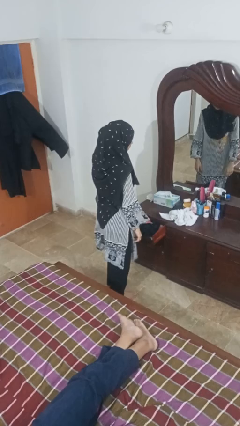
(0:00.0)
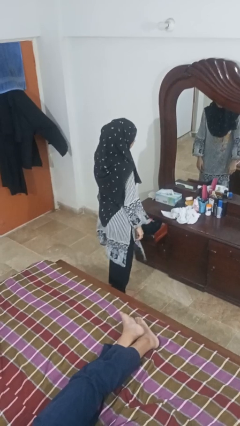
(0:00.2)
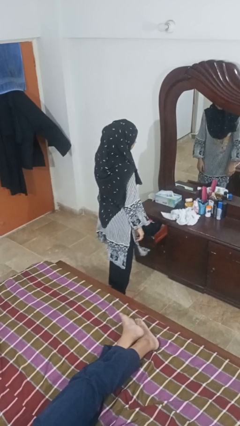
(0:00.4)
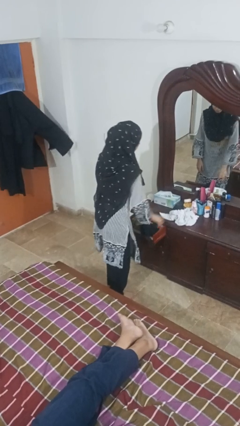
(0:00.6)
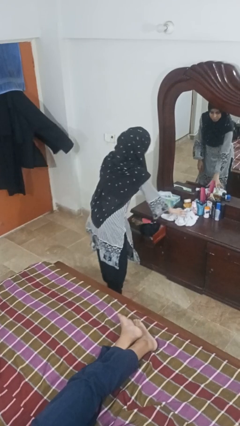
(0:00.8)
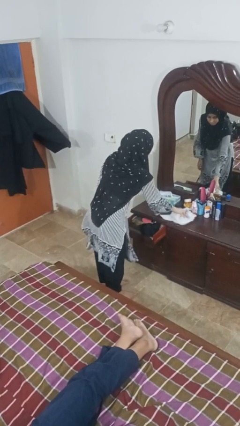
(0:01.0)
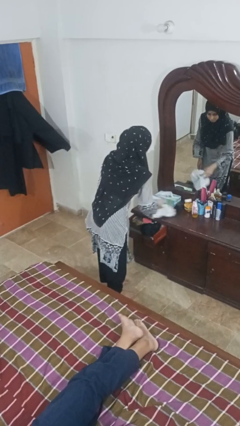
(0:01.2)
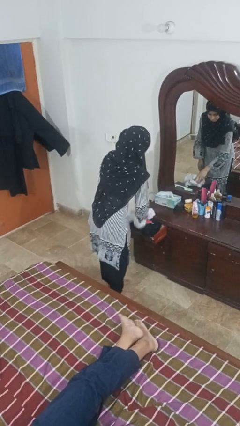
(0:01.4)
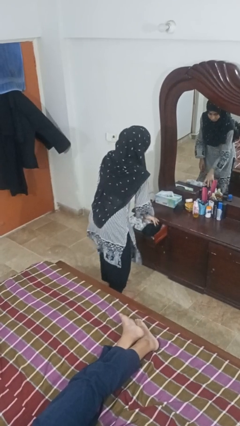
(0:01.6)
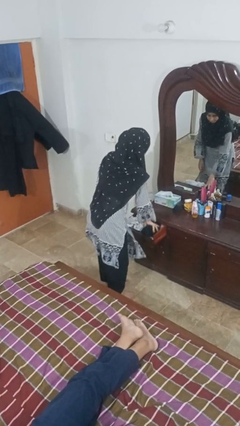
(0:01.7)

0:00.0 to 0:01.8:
person puts clothes into dresser

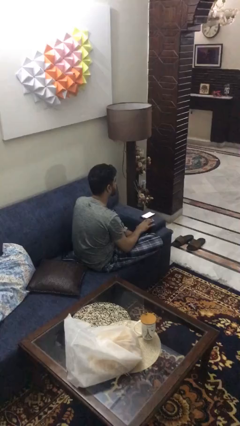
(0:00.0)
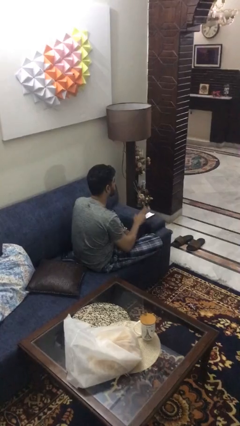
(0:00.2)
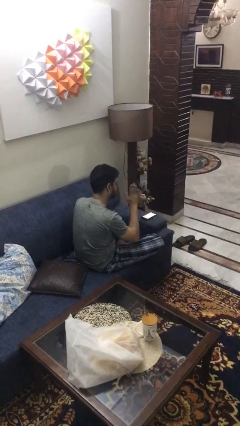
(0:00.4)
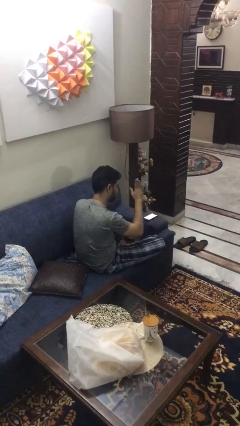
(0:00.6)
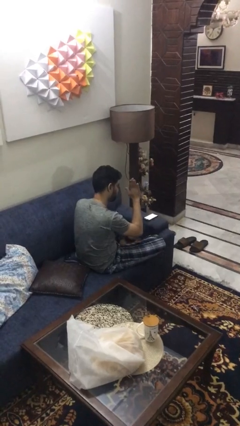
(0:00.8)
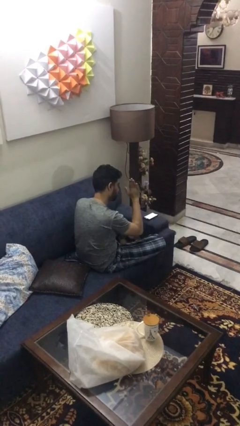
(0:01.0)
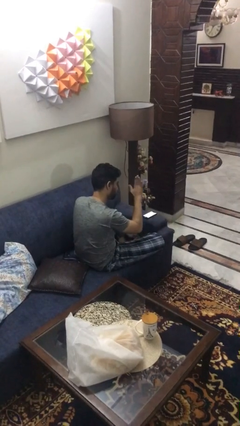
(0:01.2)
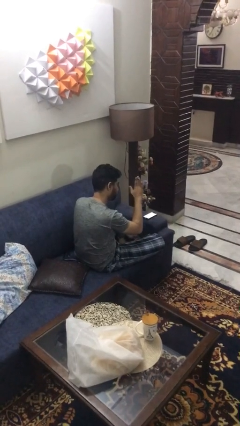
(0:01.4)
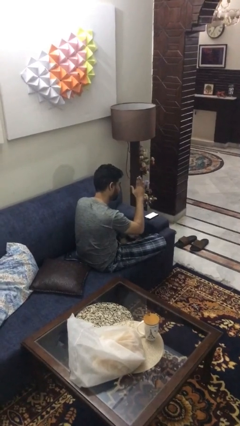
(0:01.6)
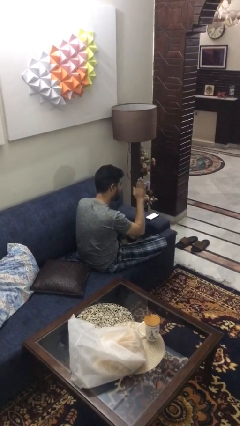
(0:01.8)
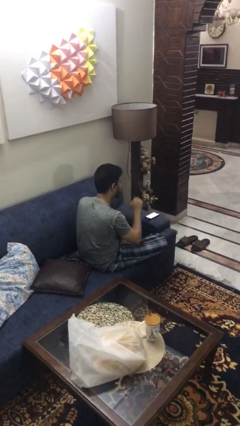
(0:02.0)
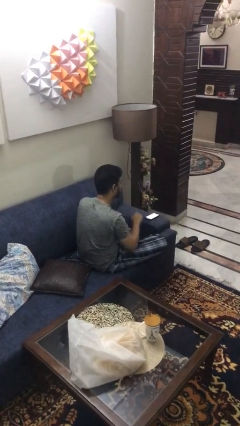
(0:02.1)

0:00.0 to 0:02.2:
person gestures stop

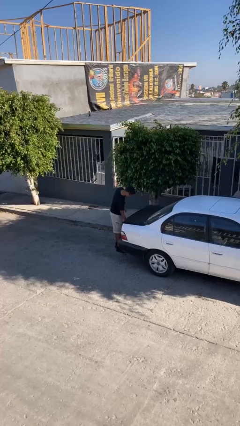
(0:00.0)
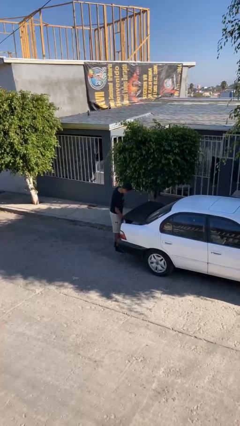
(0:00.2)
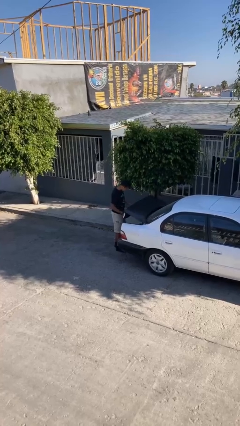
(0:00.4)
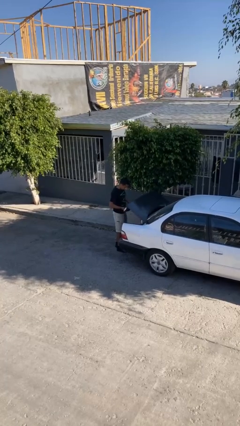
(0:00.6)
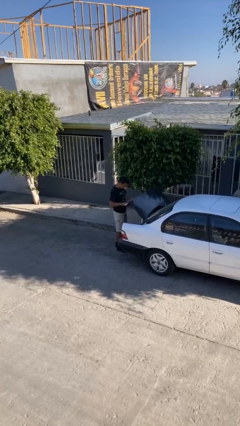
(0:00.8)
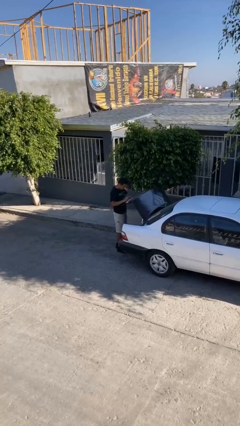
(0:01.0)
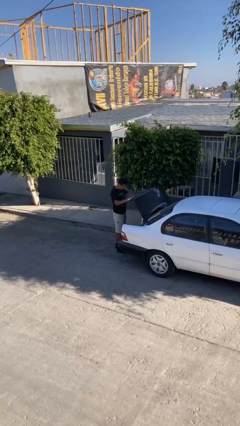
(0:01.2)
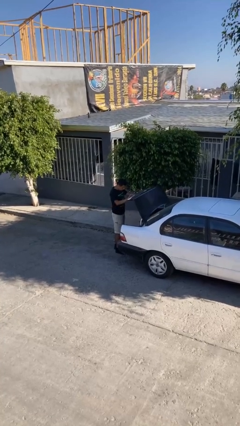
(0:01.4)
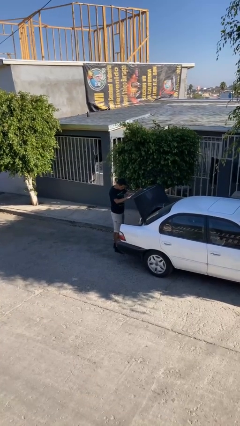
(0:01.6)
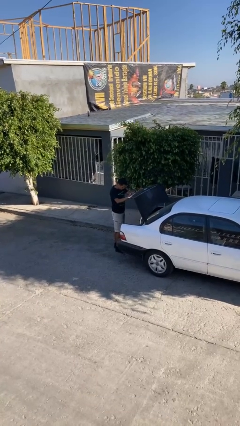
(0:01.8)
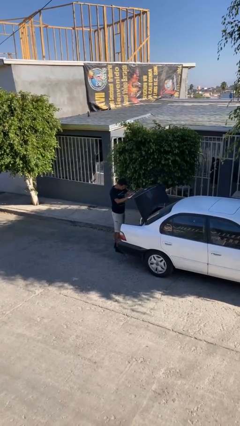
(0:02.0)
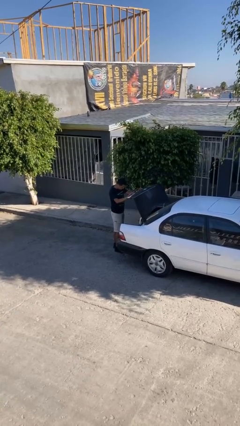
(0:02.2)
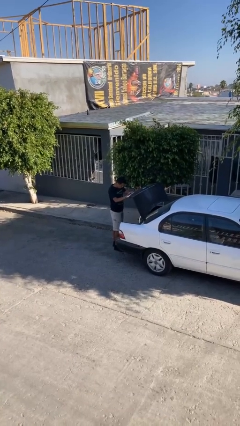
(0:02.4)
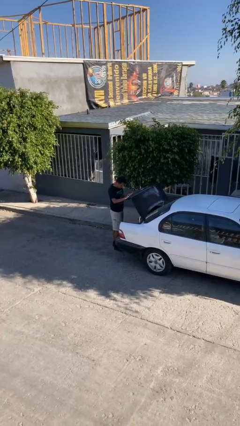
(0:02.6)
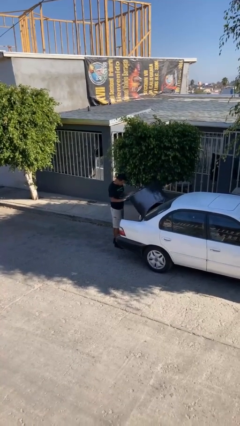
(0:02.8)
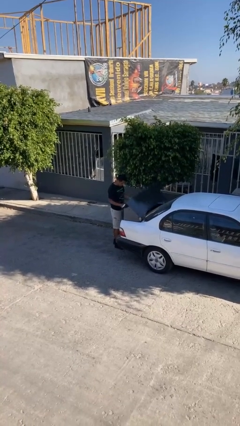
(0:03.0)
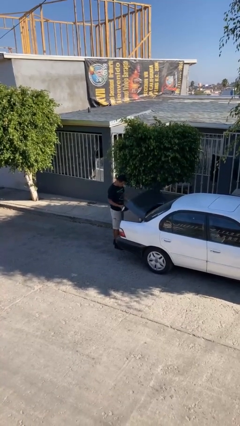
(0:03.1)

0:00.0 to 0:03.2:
person opens car trunk

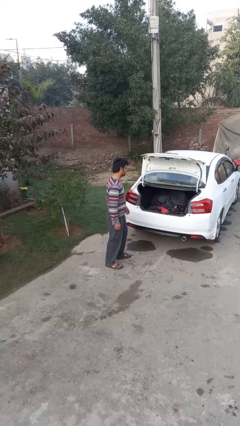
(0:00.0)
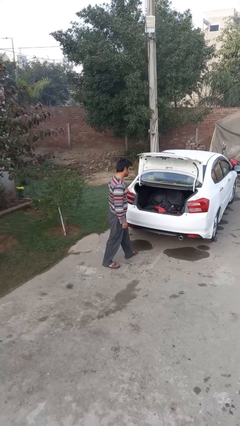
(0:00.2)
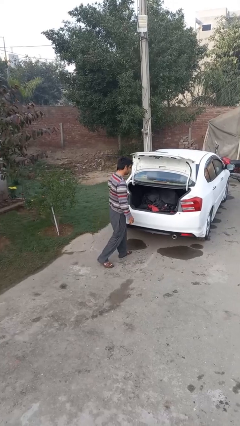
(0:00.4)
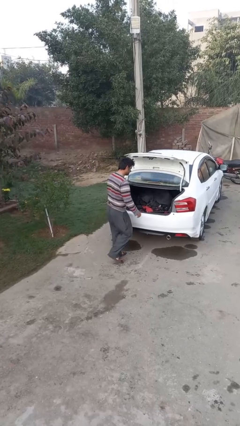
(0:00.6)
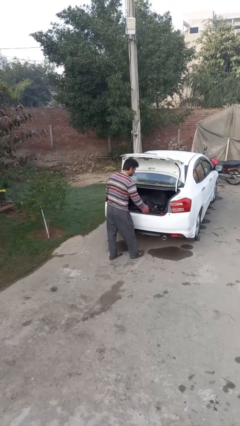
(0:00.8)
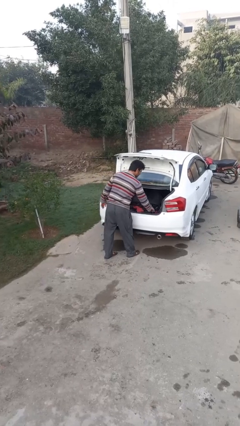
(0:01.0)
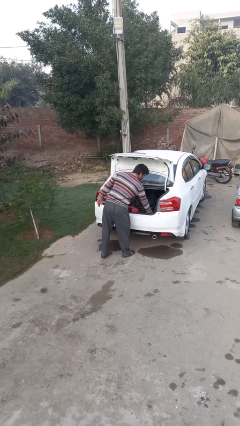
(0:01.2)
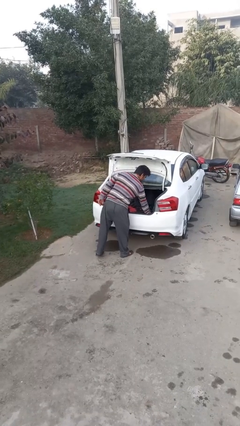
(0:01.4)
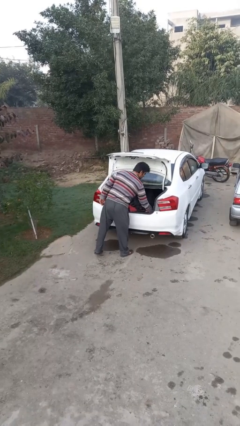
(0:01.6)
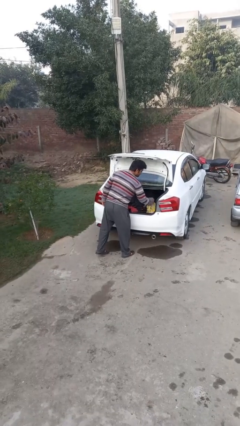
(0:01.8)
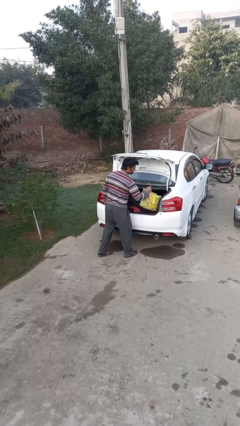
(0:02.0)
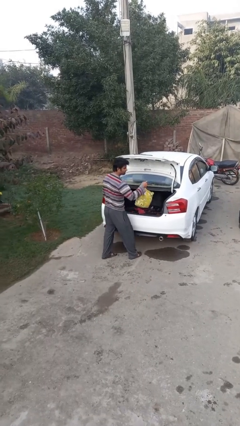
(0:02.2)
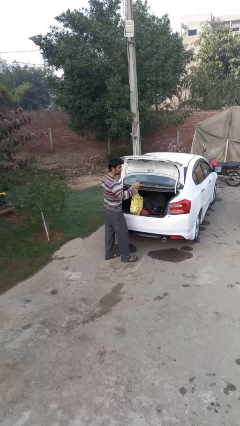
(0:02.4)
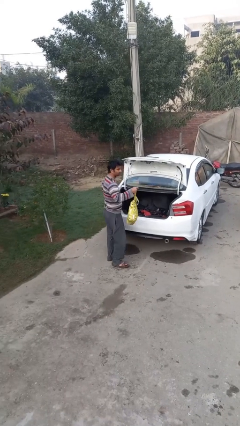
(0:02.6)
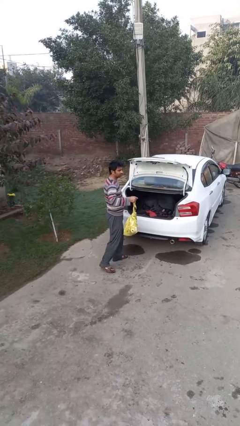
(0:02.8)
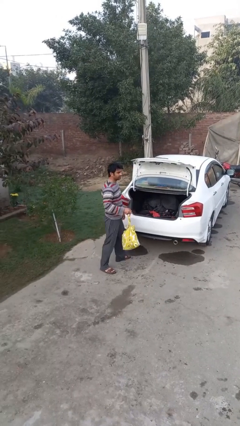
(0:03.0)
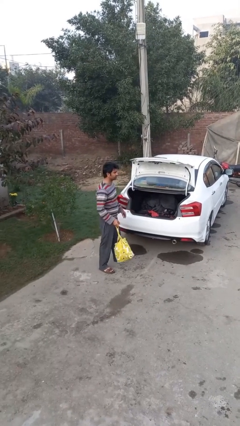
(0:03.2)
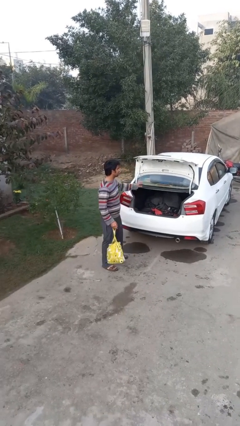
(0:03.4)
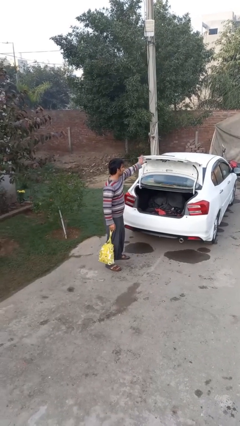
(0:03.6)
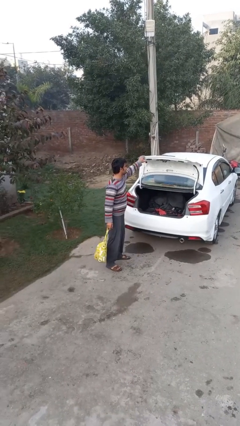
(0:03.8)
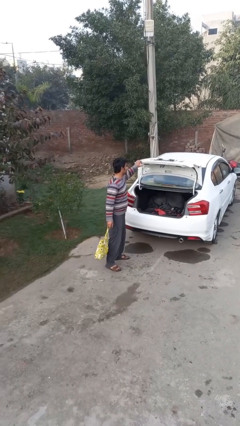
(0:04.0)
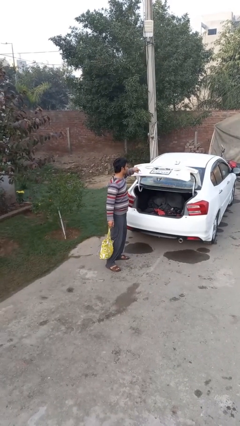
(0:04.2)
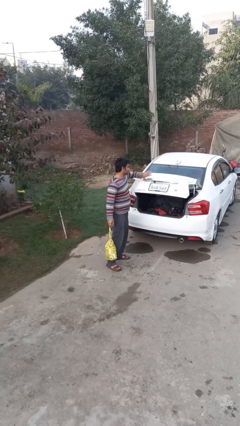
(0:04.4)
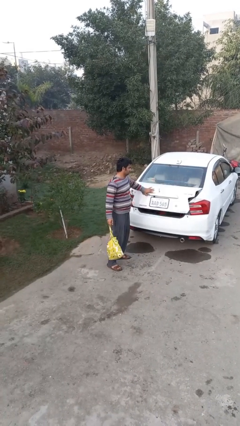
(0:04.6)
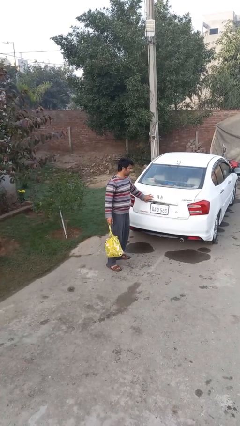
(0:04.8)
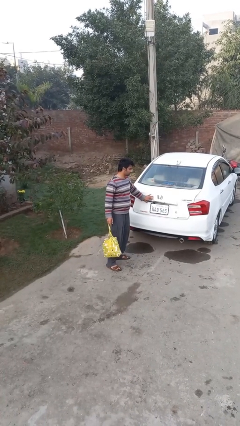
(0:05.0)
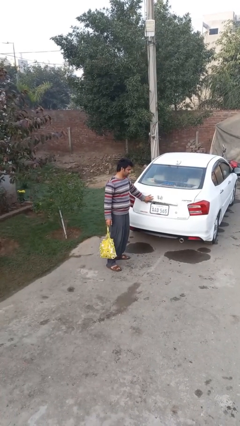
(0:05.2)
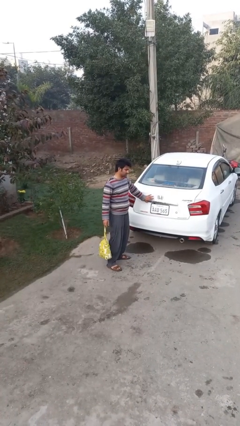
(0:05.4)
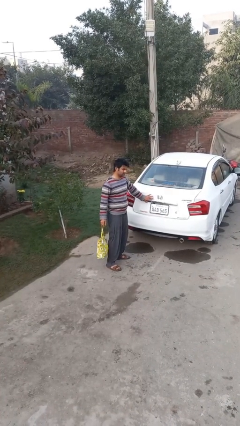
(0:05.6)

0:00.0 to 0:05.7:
person unloads car

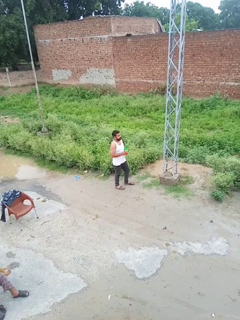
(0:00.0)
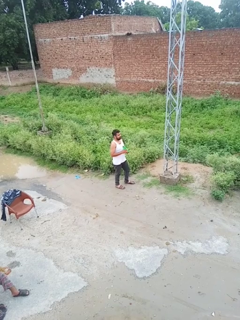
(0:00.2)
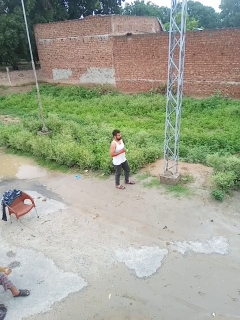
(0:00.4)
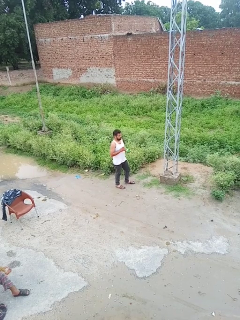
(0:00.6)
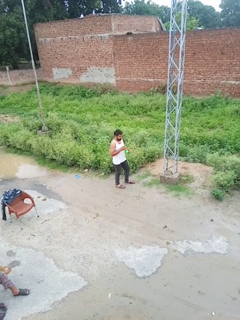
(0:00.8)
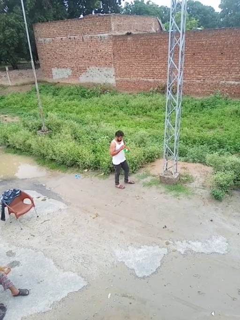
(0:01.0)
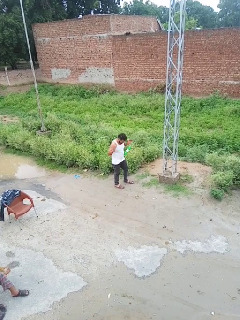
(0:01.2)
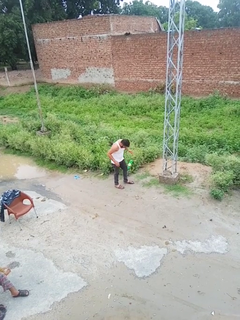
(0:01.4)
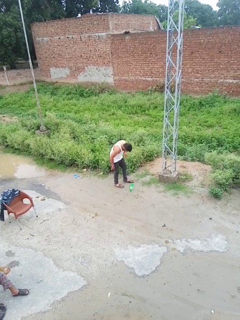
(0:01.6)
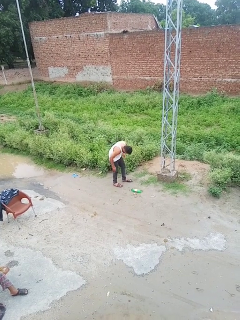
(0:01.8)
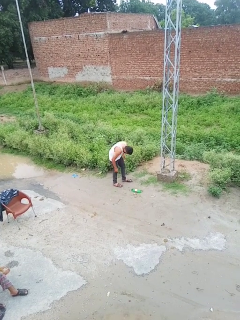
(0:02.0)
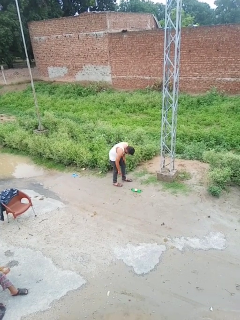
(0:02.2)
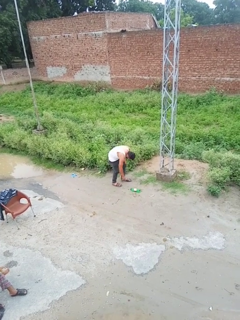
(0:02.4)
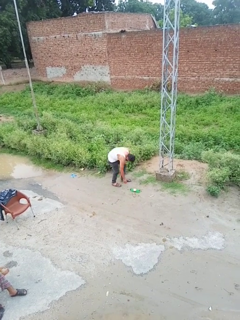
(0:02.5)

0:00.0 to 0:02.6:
person drops object

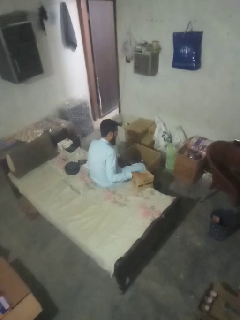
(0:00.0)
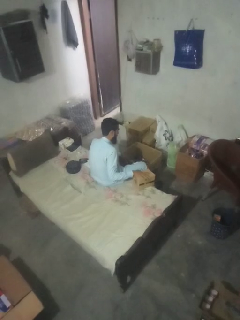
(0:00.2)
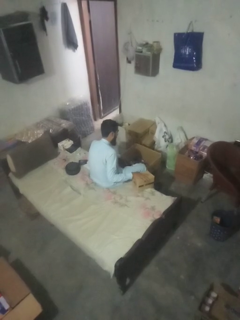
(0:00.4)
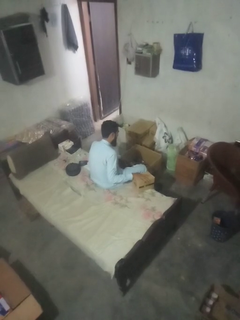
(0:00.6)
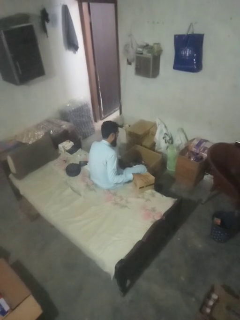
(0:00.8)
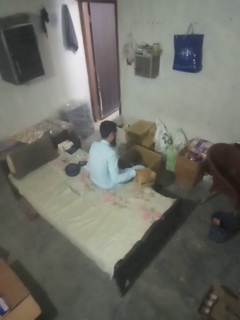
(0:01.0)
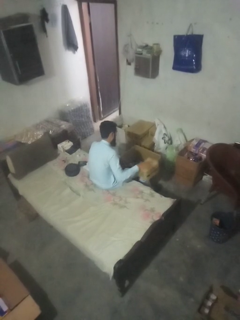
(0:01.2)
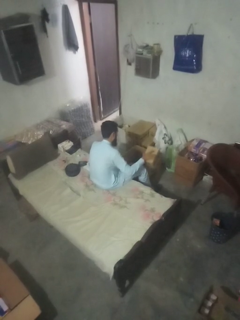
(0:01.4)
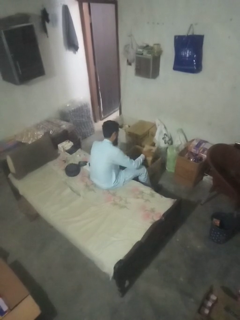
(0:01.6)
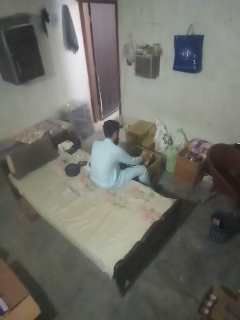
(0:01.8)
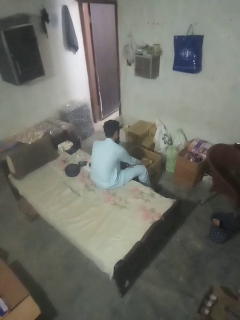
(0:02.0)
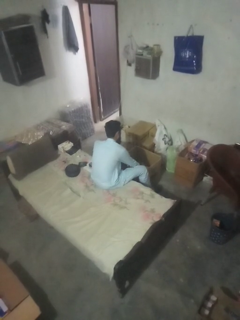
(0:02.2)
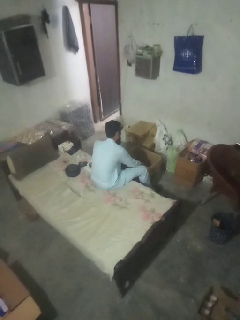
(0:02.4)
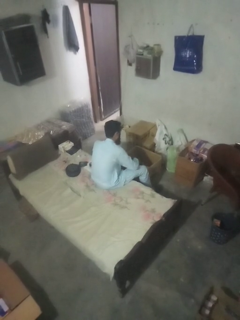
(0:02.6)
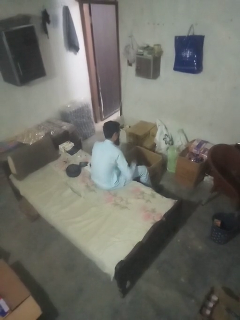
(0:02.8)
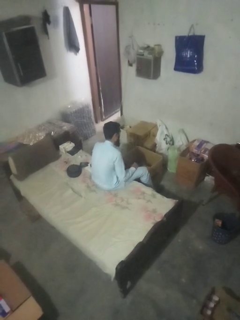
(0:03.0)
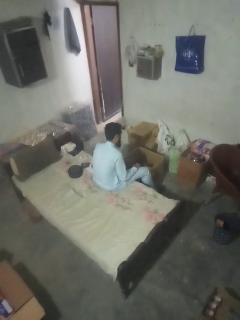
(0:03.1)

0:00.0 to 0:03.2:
person puts object into box

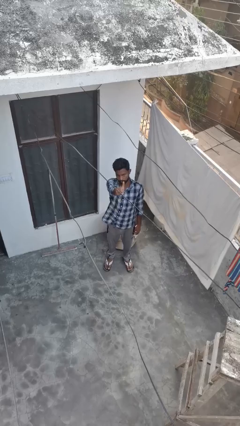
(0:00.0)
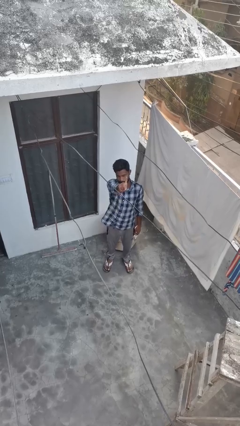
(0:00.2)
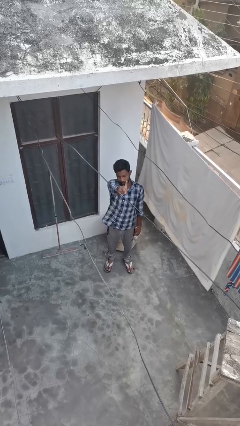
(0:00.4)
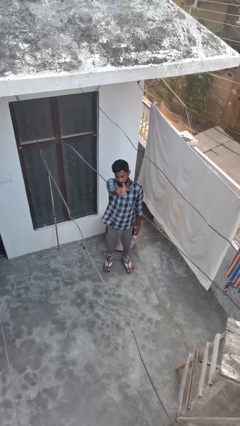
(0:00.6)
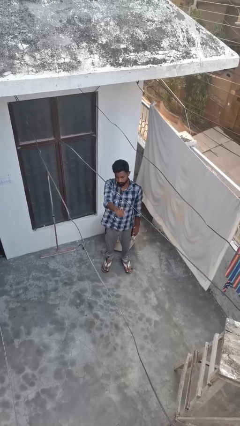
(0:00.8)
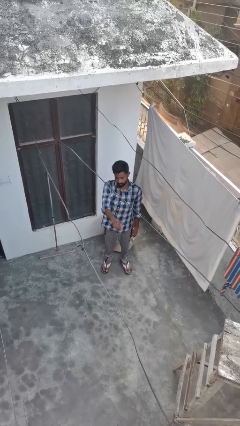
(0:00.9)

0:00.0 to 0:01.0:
person gestures number one
